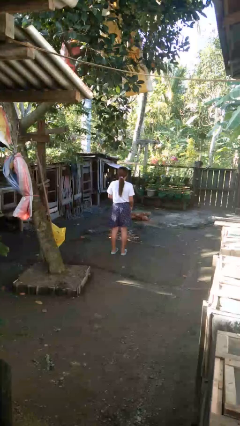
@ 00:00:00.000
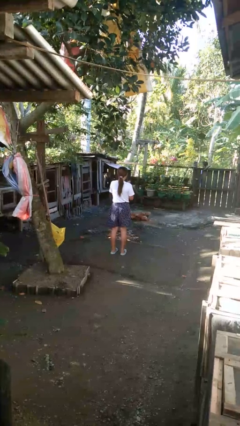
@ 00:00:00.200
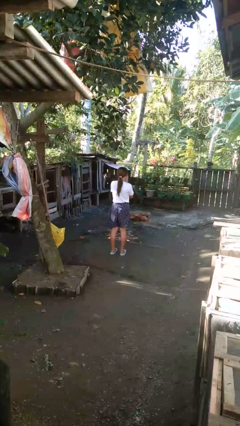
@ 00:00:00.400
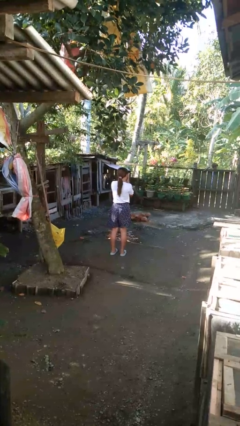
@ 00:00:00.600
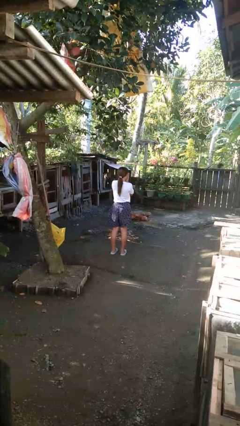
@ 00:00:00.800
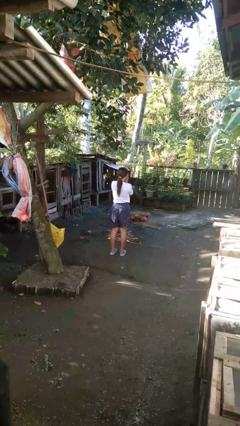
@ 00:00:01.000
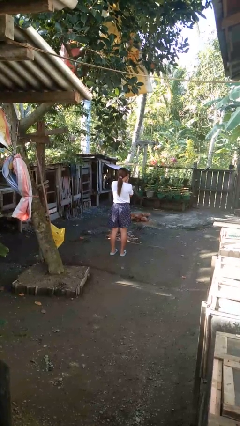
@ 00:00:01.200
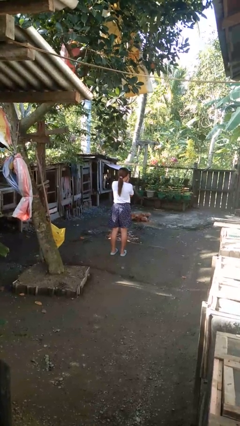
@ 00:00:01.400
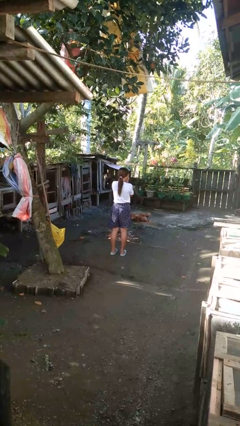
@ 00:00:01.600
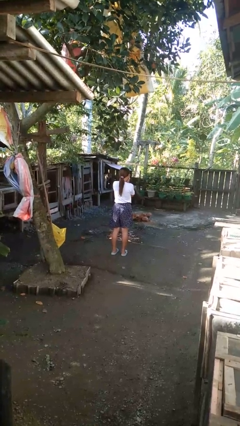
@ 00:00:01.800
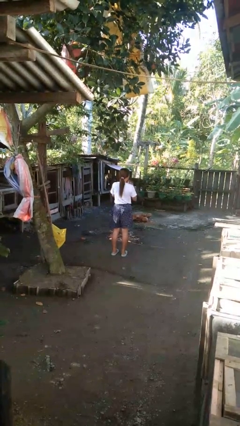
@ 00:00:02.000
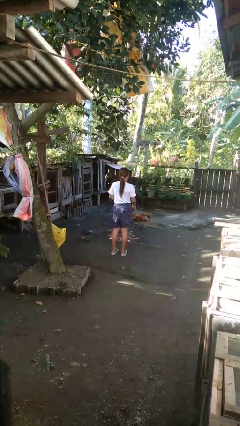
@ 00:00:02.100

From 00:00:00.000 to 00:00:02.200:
person blows into hands

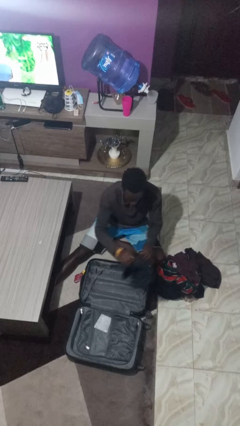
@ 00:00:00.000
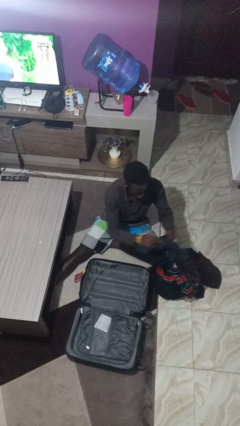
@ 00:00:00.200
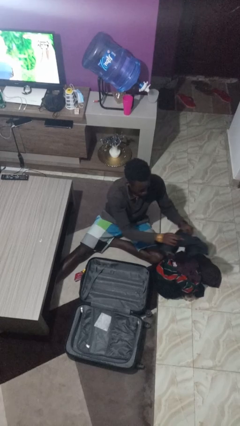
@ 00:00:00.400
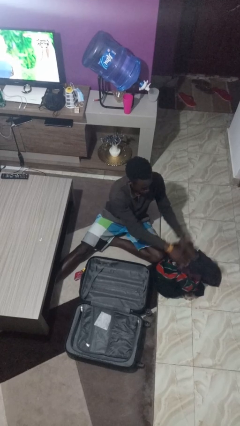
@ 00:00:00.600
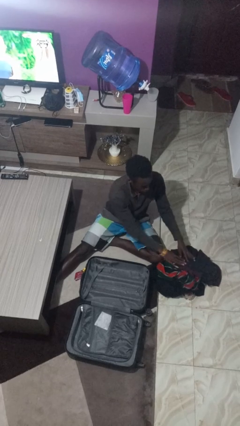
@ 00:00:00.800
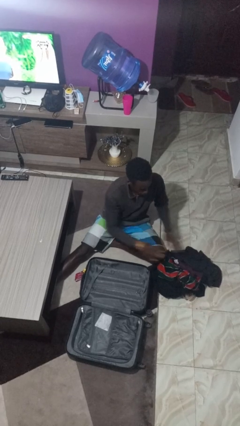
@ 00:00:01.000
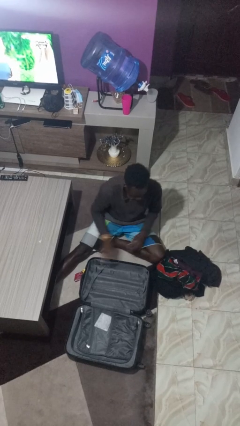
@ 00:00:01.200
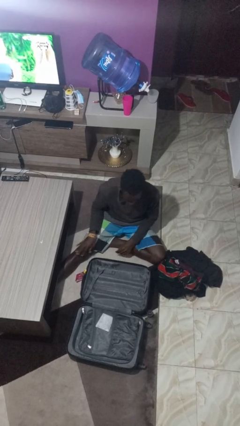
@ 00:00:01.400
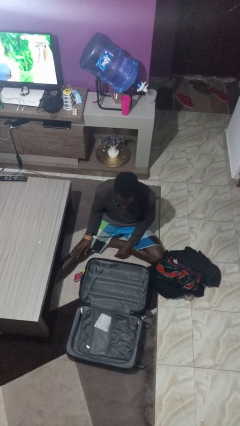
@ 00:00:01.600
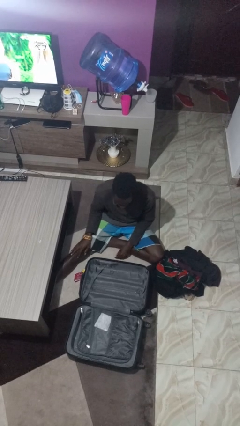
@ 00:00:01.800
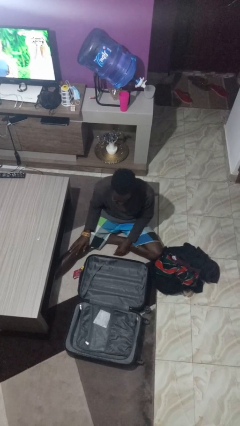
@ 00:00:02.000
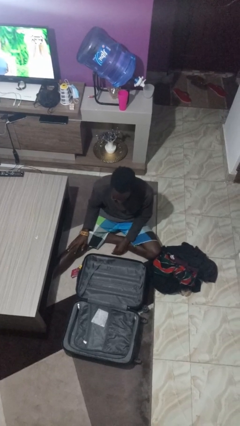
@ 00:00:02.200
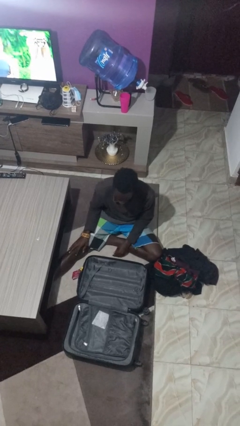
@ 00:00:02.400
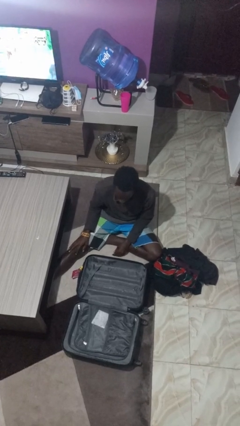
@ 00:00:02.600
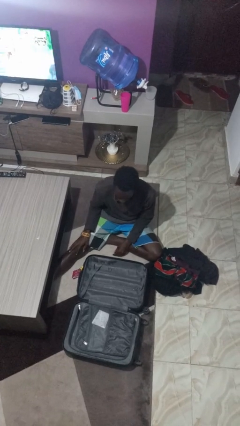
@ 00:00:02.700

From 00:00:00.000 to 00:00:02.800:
person unloads clothes from suitcase

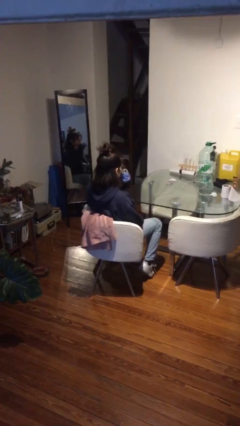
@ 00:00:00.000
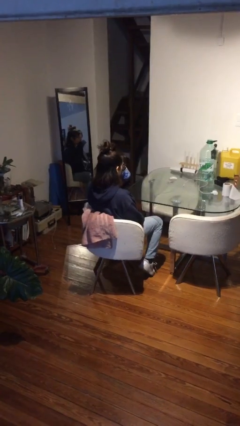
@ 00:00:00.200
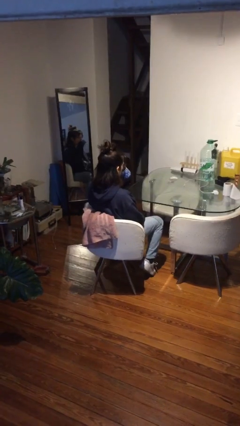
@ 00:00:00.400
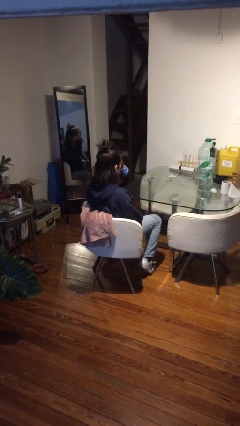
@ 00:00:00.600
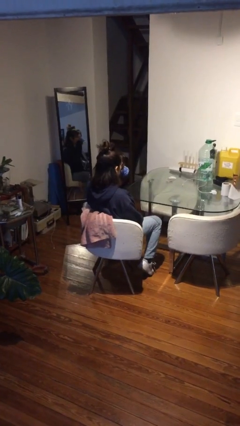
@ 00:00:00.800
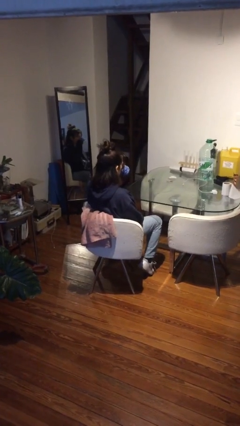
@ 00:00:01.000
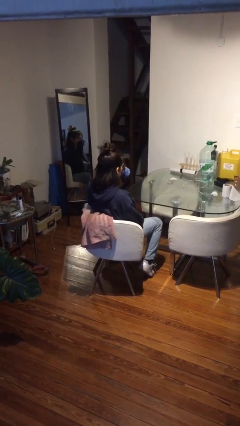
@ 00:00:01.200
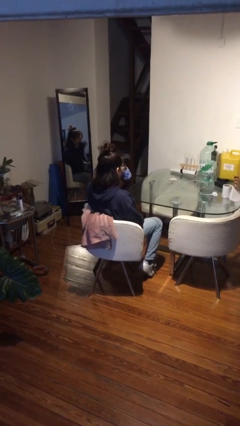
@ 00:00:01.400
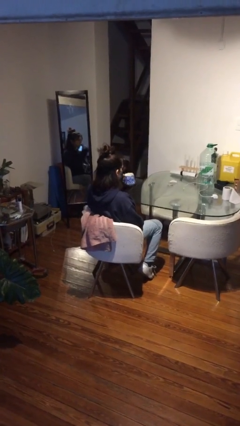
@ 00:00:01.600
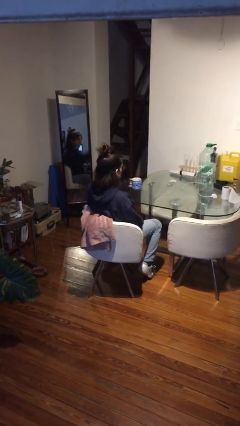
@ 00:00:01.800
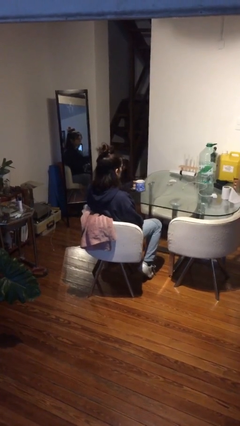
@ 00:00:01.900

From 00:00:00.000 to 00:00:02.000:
person drinks from mug

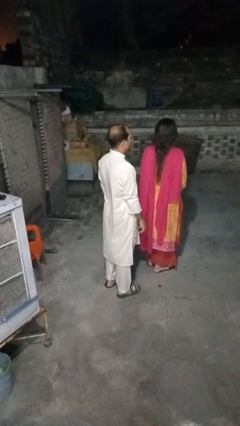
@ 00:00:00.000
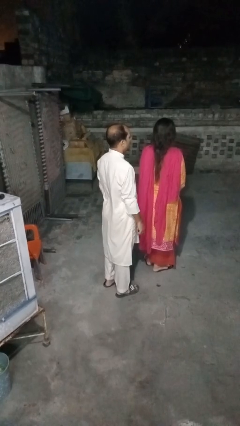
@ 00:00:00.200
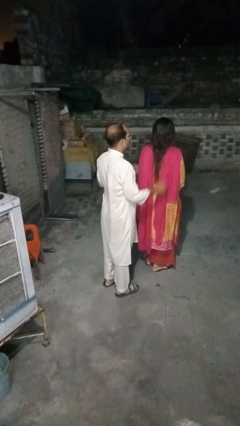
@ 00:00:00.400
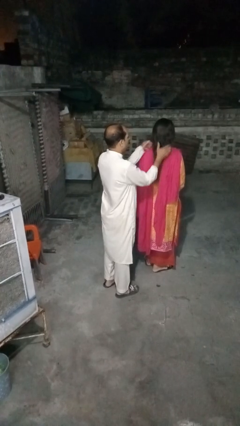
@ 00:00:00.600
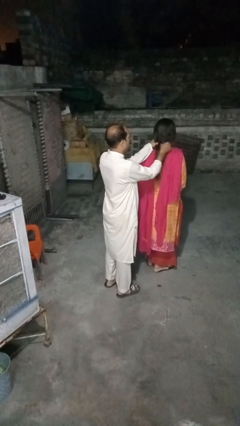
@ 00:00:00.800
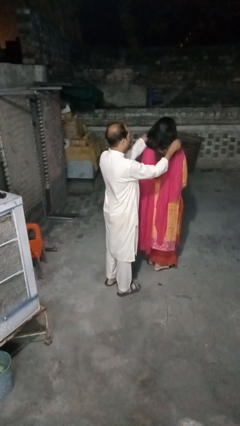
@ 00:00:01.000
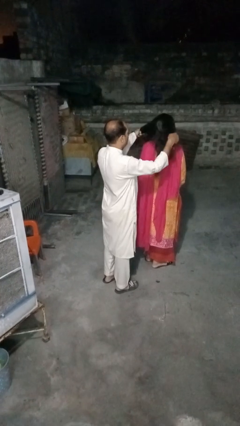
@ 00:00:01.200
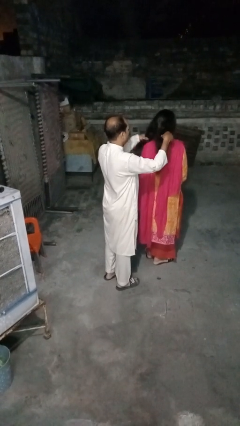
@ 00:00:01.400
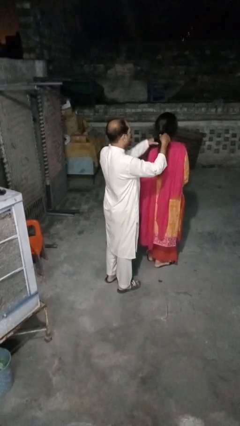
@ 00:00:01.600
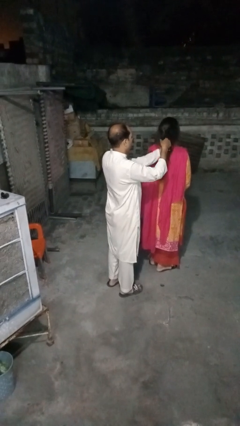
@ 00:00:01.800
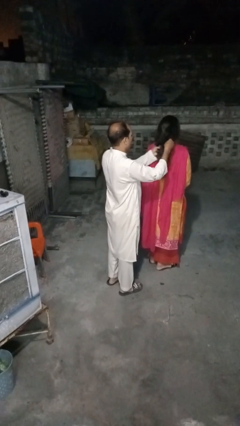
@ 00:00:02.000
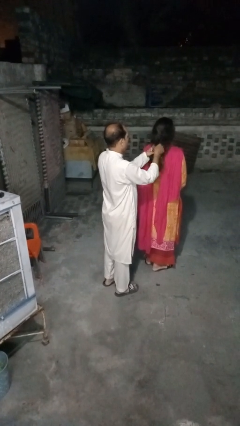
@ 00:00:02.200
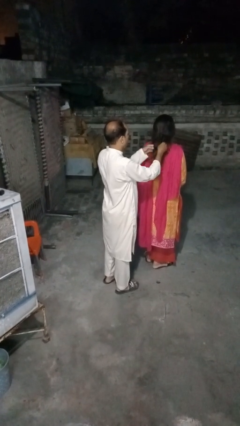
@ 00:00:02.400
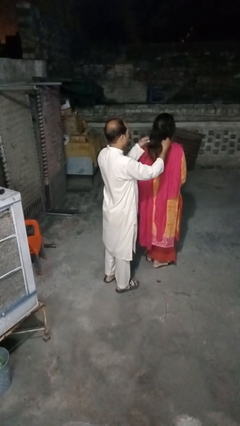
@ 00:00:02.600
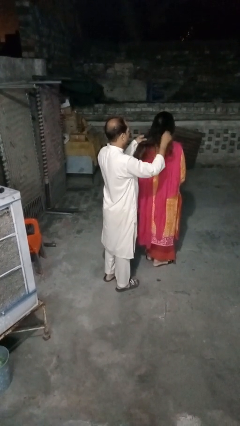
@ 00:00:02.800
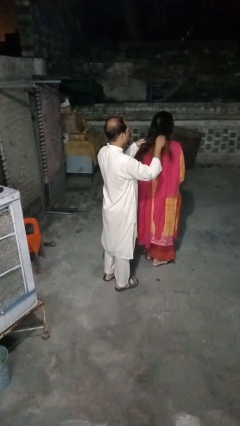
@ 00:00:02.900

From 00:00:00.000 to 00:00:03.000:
person braids hair of person

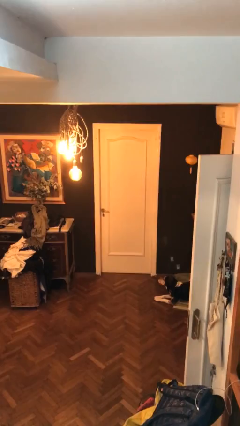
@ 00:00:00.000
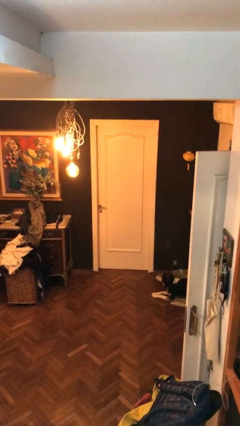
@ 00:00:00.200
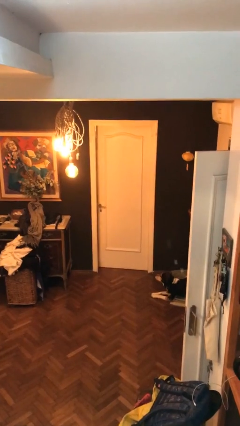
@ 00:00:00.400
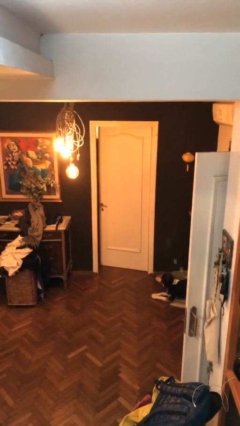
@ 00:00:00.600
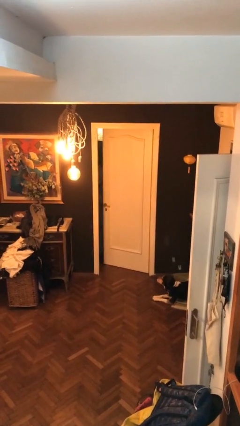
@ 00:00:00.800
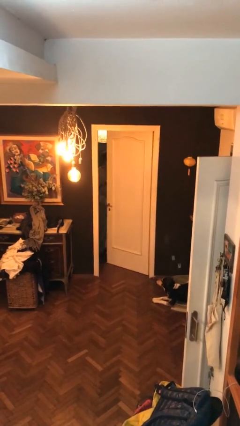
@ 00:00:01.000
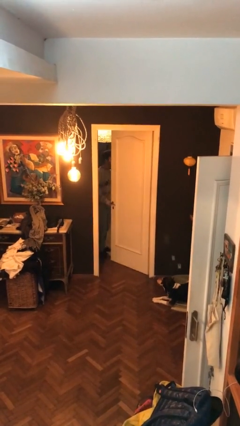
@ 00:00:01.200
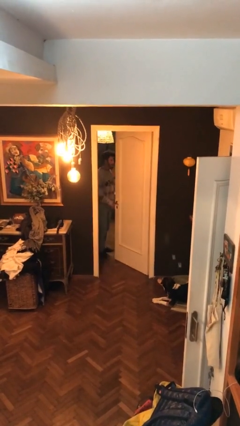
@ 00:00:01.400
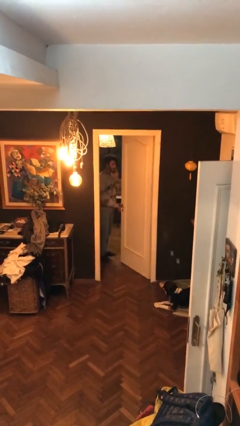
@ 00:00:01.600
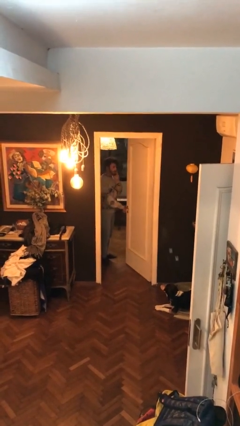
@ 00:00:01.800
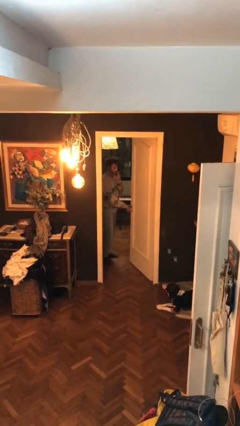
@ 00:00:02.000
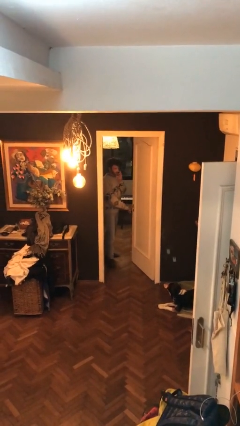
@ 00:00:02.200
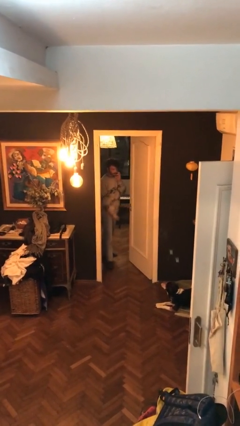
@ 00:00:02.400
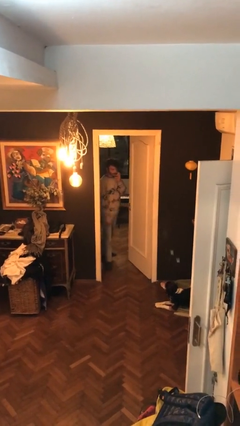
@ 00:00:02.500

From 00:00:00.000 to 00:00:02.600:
person opens facility door

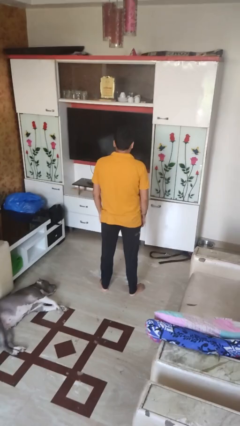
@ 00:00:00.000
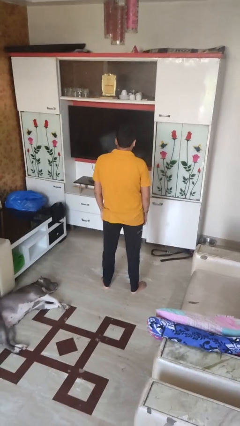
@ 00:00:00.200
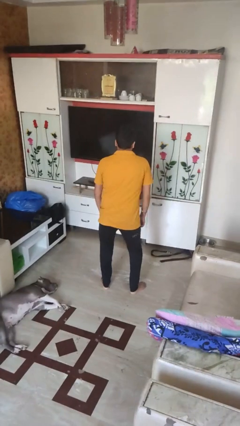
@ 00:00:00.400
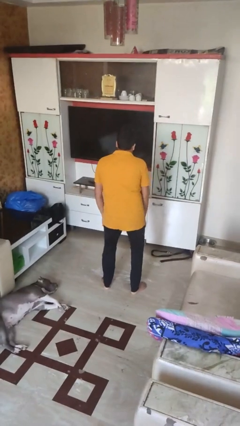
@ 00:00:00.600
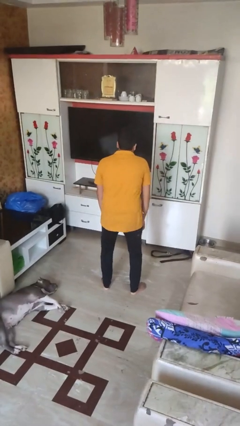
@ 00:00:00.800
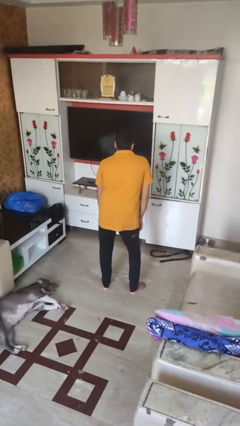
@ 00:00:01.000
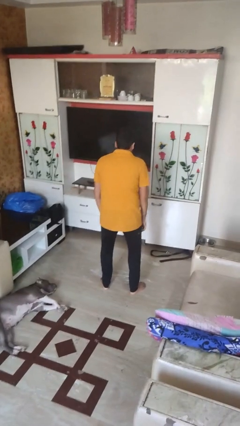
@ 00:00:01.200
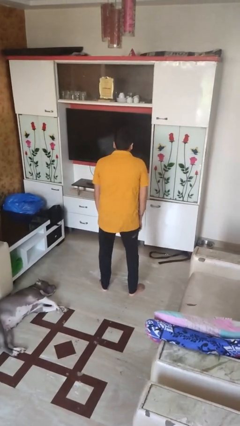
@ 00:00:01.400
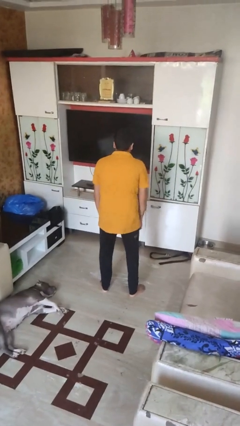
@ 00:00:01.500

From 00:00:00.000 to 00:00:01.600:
person wiggles hips

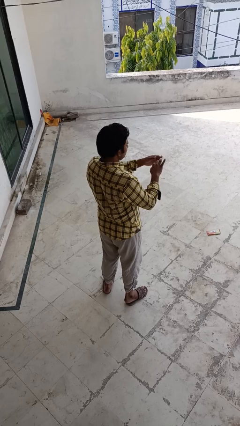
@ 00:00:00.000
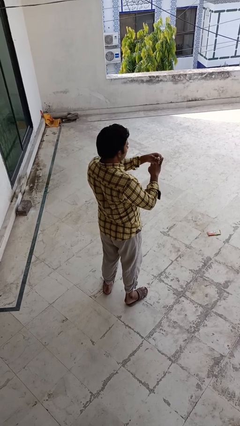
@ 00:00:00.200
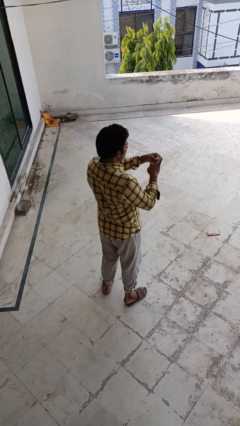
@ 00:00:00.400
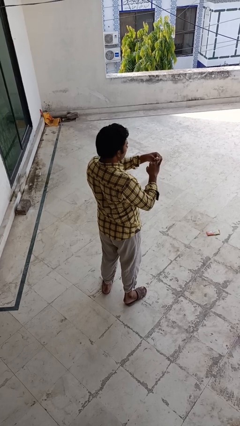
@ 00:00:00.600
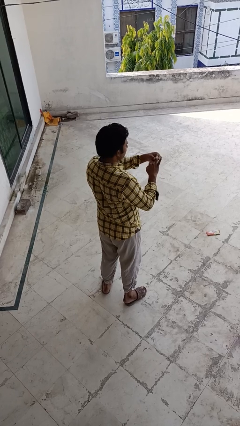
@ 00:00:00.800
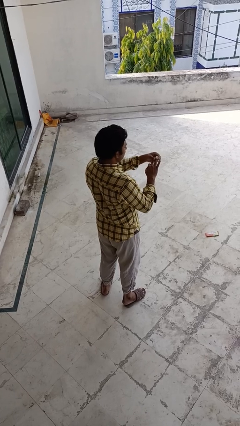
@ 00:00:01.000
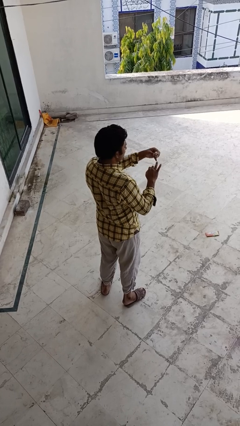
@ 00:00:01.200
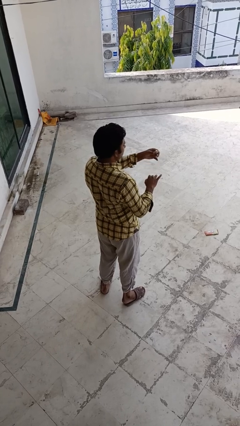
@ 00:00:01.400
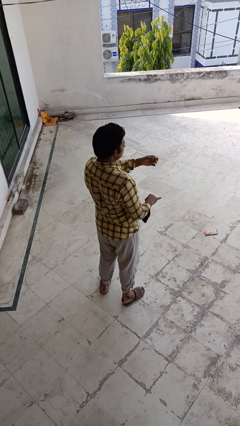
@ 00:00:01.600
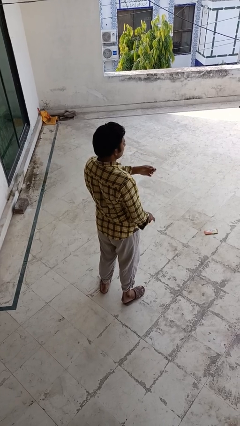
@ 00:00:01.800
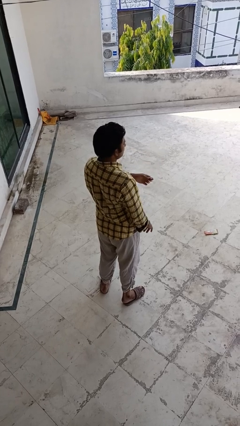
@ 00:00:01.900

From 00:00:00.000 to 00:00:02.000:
person takes off ring

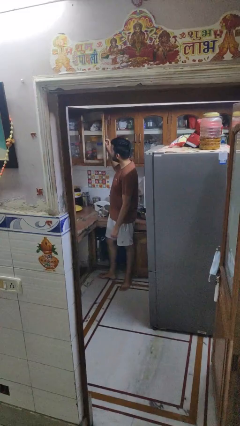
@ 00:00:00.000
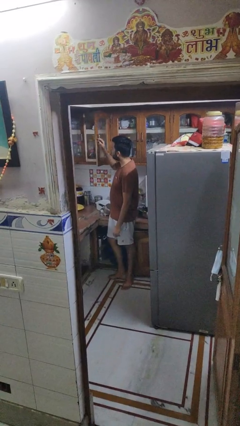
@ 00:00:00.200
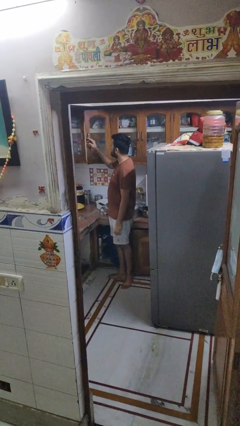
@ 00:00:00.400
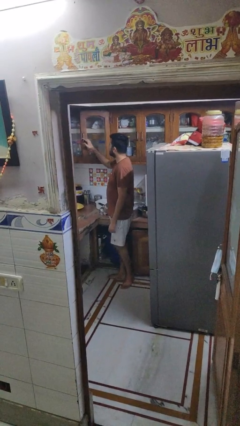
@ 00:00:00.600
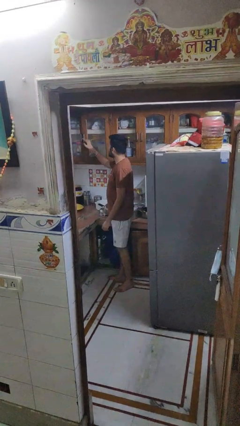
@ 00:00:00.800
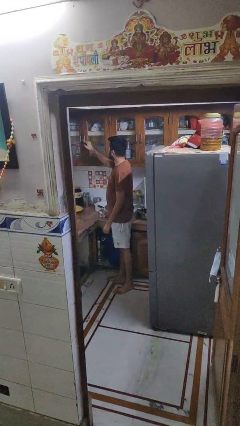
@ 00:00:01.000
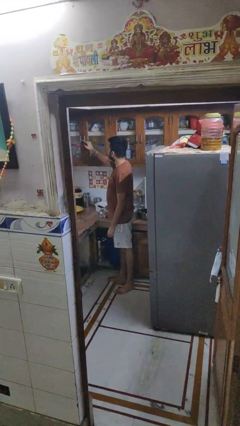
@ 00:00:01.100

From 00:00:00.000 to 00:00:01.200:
person closes cabinet
